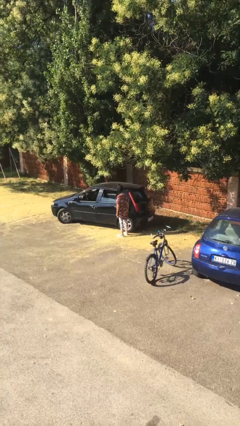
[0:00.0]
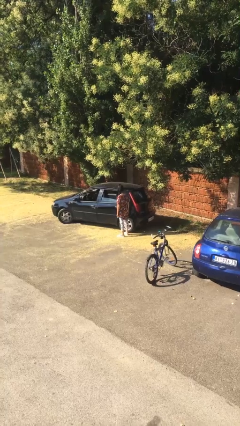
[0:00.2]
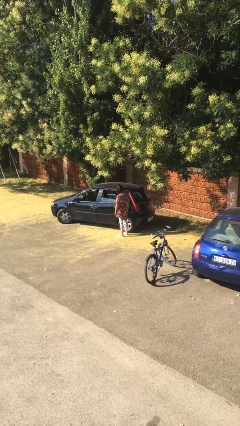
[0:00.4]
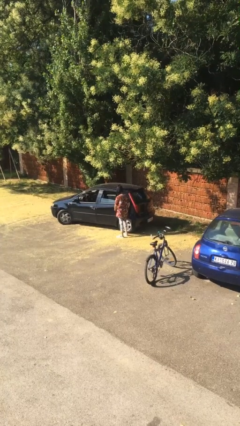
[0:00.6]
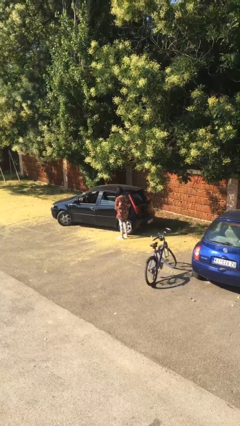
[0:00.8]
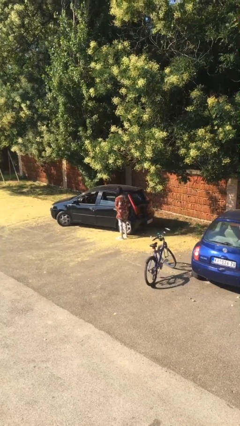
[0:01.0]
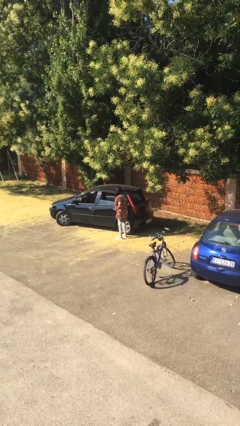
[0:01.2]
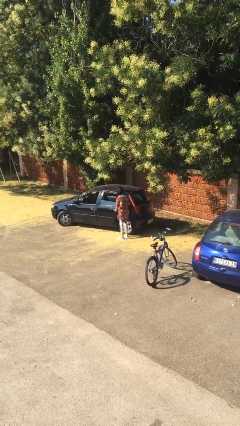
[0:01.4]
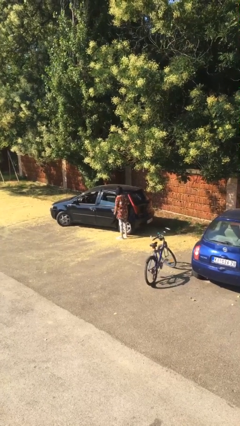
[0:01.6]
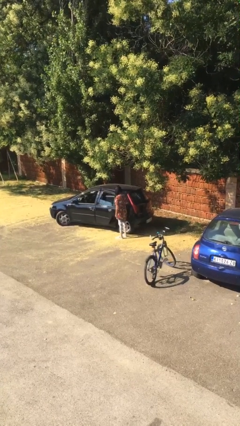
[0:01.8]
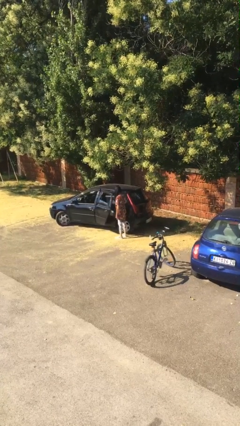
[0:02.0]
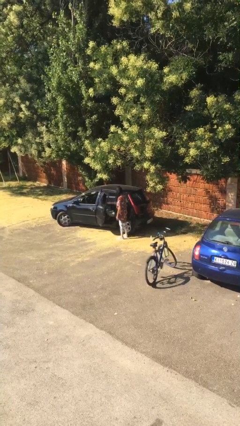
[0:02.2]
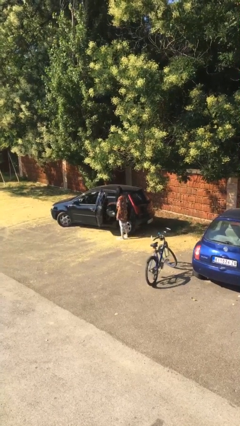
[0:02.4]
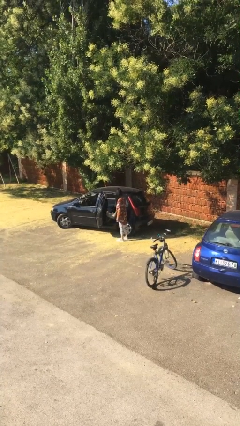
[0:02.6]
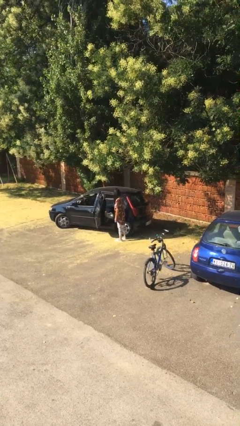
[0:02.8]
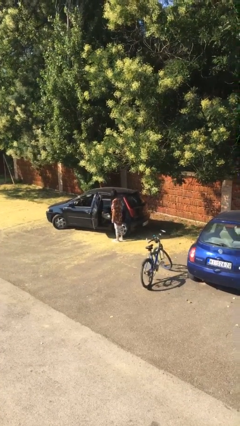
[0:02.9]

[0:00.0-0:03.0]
person opens car door

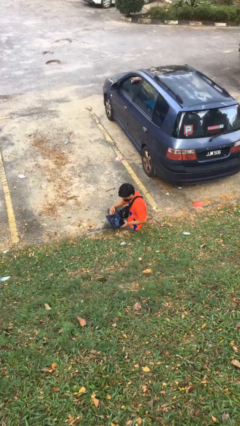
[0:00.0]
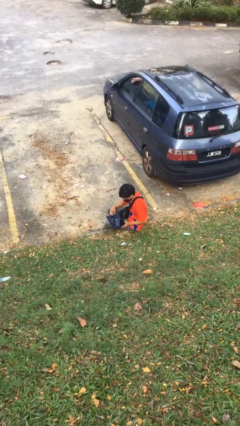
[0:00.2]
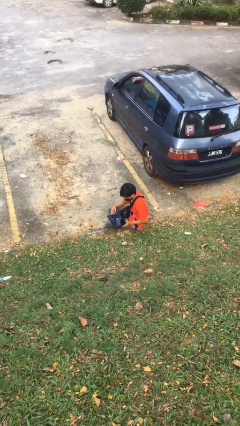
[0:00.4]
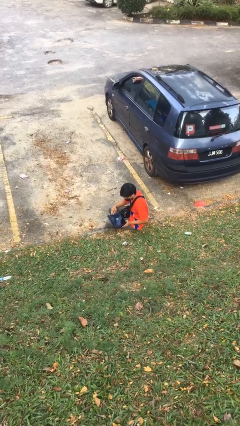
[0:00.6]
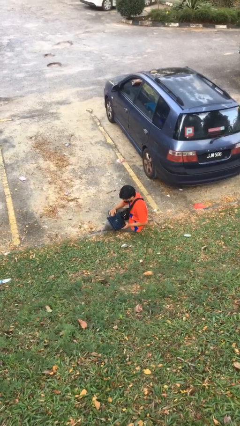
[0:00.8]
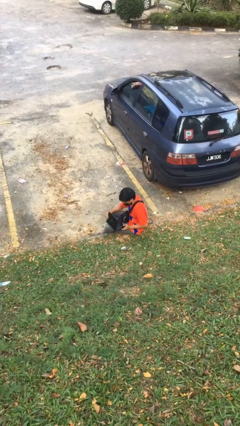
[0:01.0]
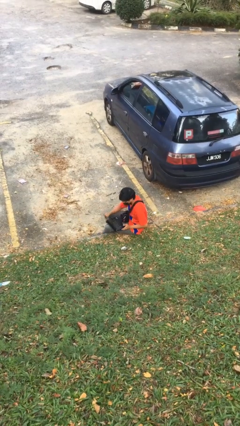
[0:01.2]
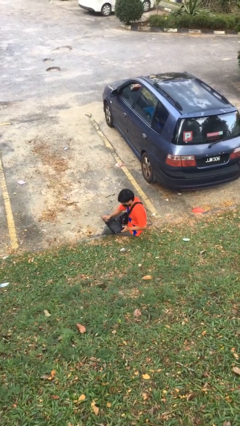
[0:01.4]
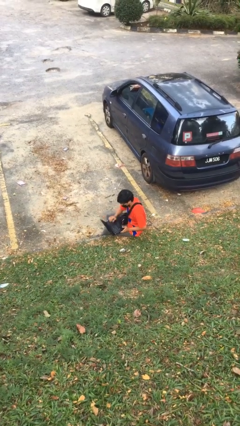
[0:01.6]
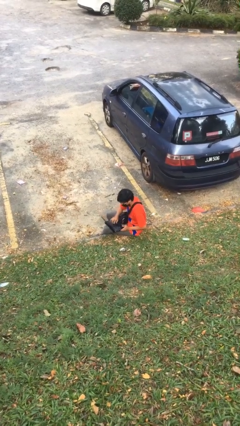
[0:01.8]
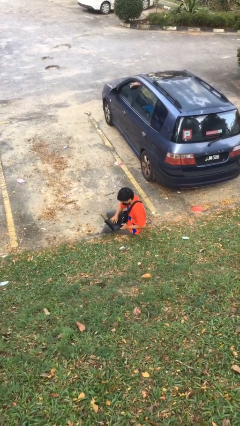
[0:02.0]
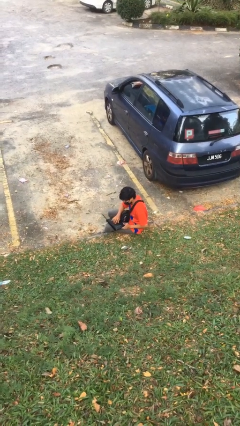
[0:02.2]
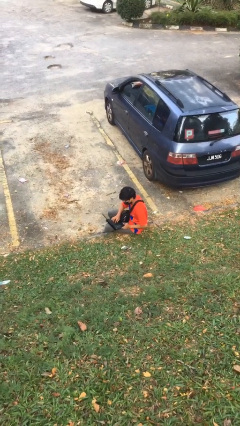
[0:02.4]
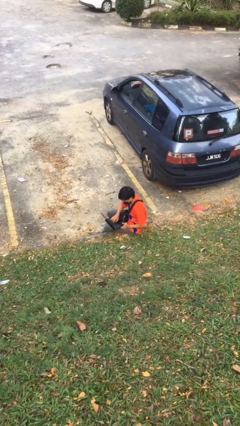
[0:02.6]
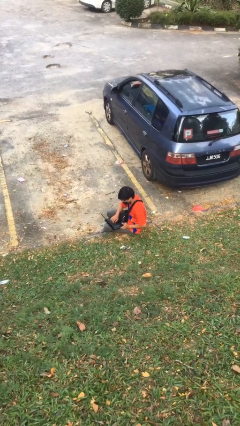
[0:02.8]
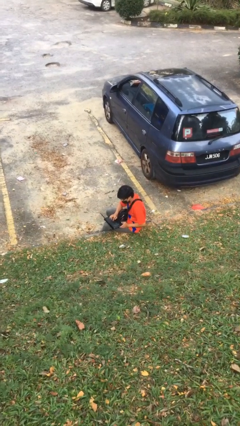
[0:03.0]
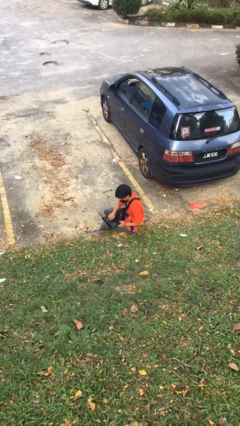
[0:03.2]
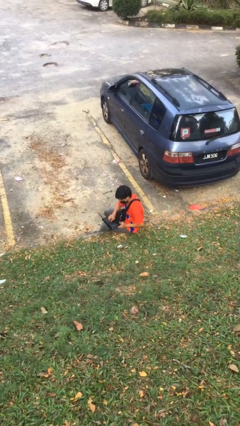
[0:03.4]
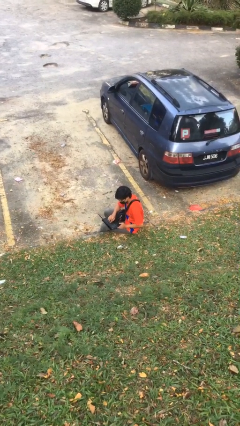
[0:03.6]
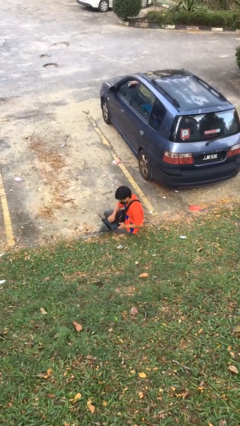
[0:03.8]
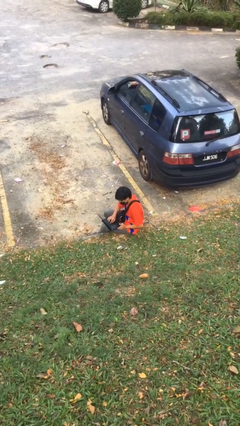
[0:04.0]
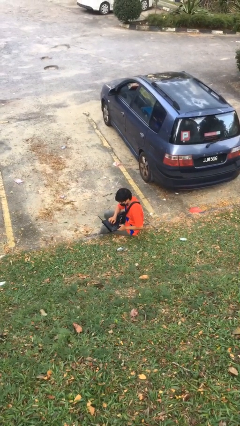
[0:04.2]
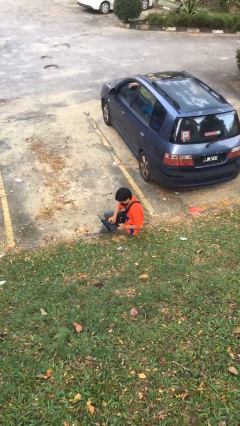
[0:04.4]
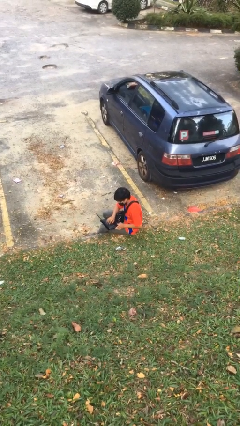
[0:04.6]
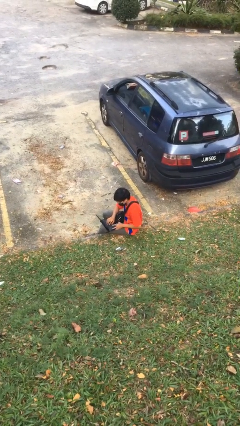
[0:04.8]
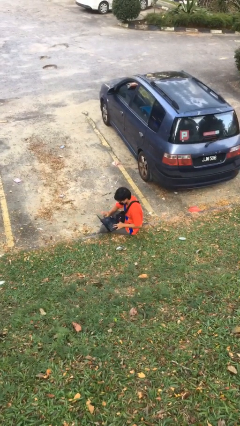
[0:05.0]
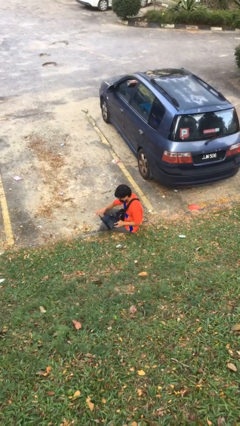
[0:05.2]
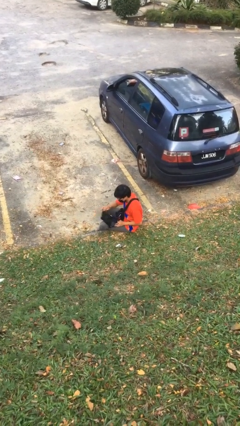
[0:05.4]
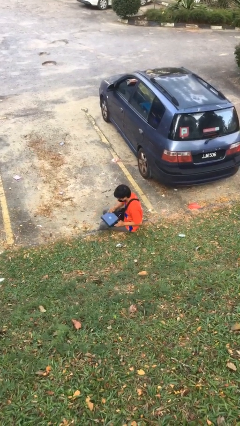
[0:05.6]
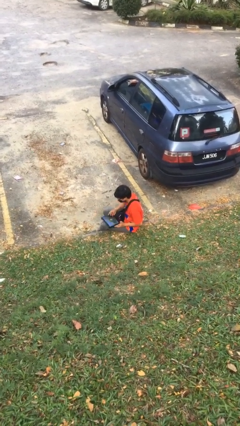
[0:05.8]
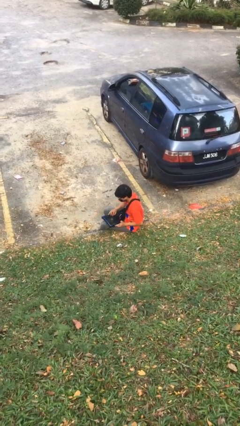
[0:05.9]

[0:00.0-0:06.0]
person interacts with laptop

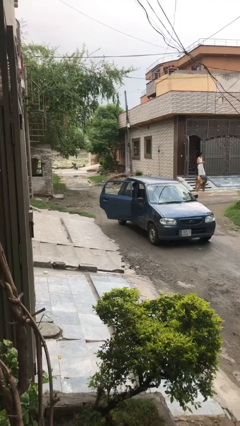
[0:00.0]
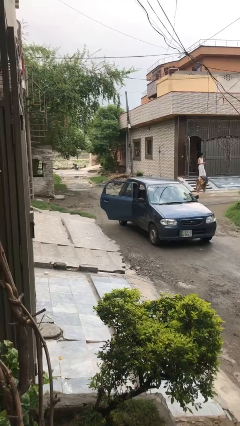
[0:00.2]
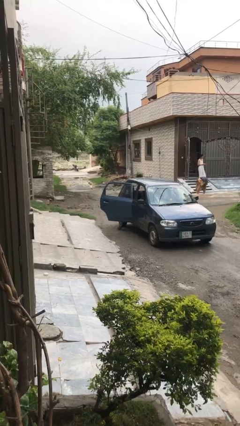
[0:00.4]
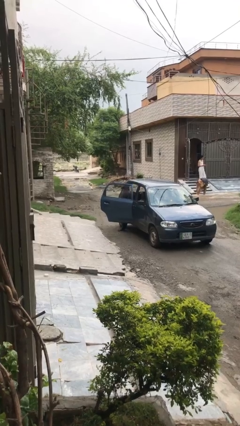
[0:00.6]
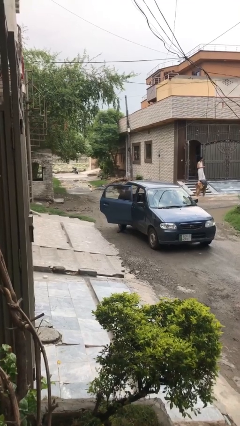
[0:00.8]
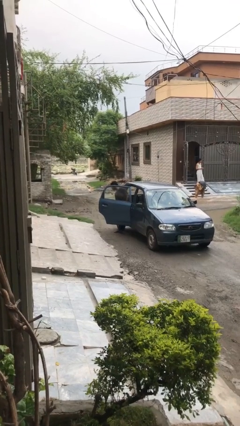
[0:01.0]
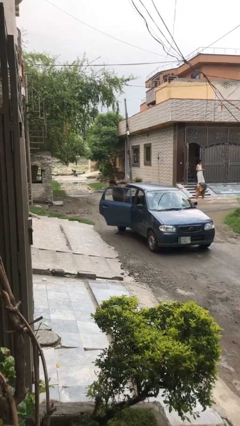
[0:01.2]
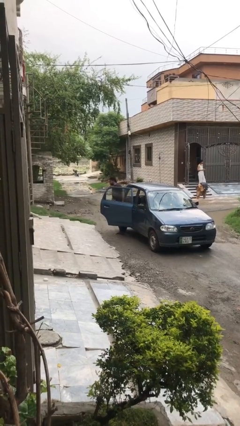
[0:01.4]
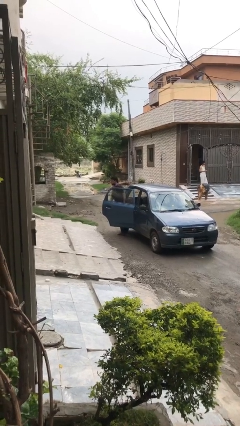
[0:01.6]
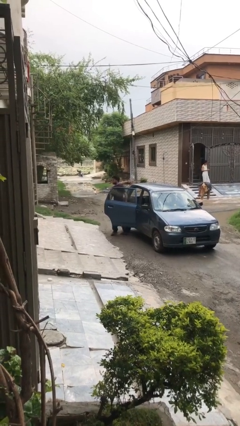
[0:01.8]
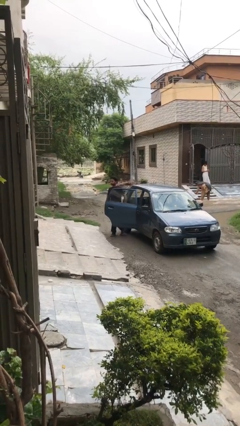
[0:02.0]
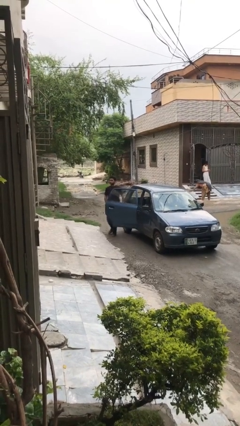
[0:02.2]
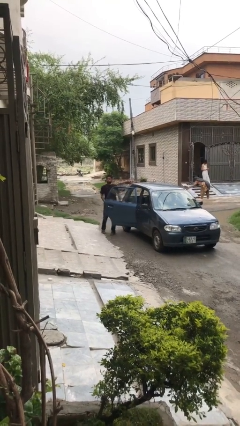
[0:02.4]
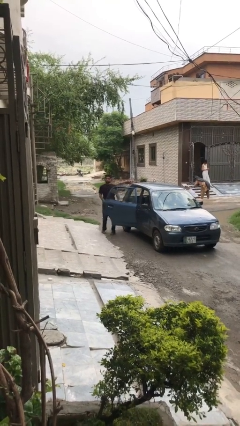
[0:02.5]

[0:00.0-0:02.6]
person exits car

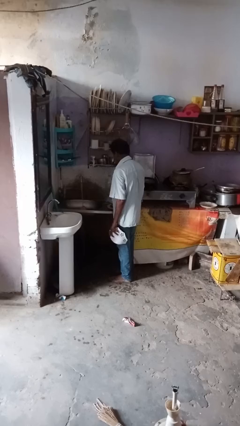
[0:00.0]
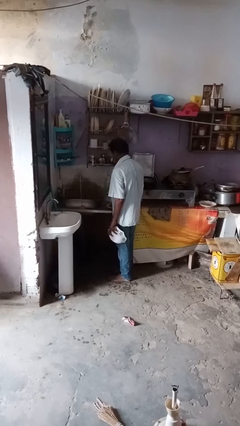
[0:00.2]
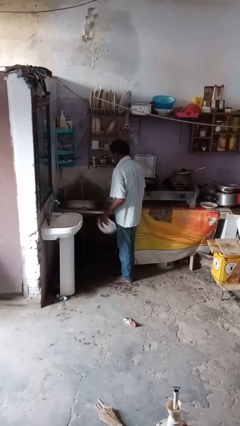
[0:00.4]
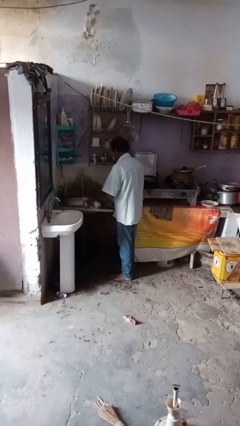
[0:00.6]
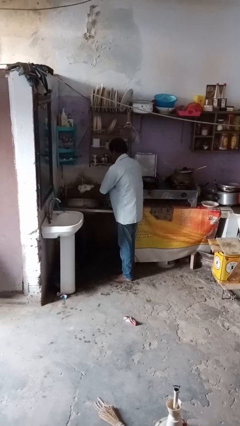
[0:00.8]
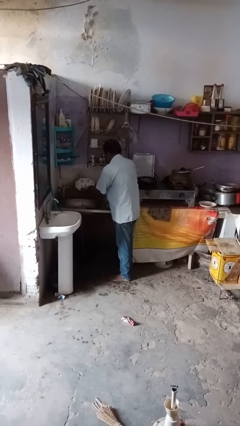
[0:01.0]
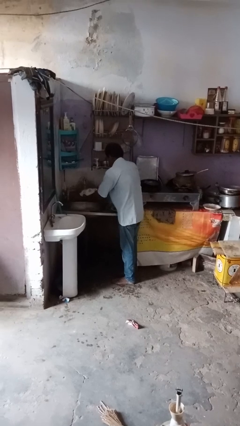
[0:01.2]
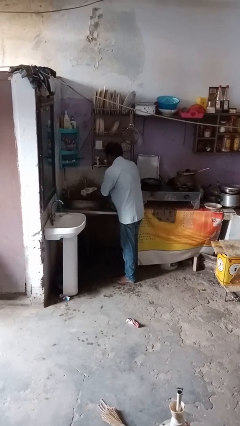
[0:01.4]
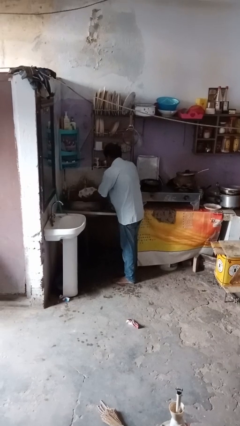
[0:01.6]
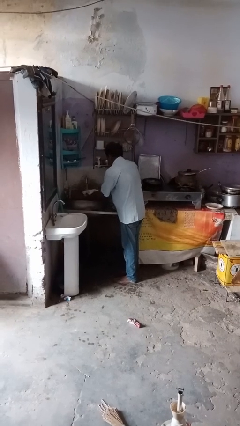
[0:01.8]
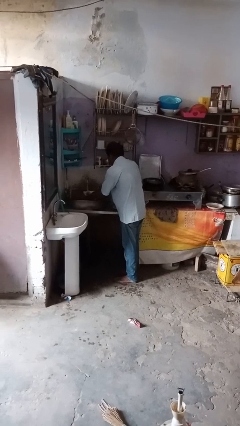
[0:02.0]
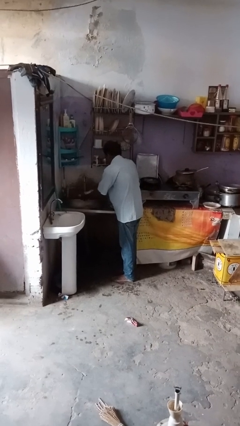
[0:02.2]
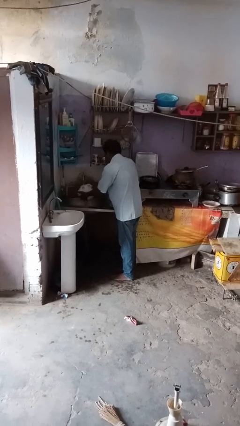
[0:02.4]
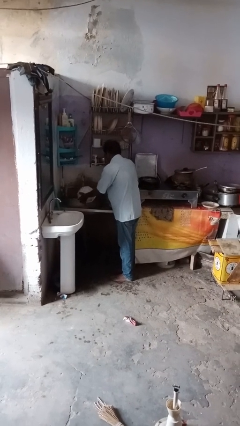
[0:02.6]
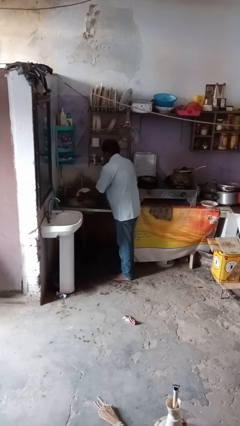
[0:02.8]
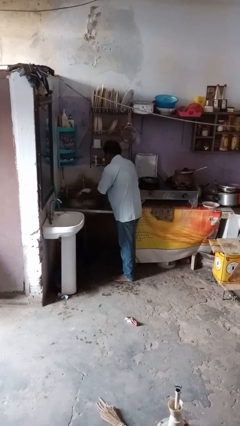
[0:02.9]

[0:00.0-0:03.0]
person washes dish

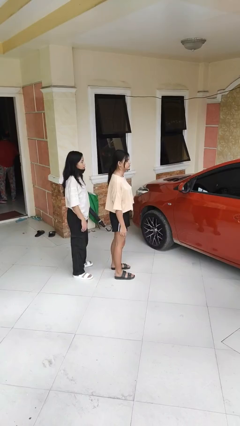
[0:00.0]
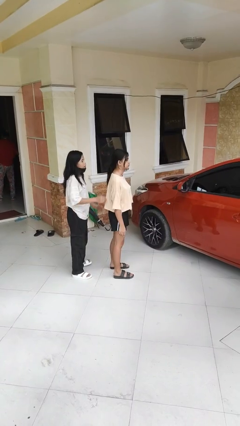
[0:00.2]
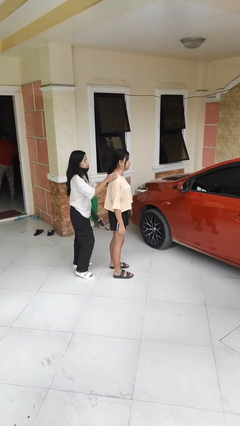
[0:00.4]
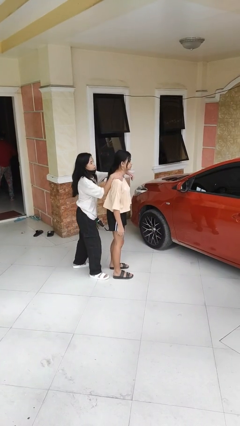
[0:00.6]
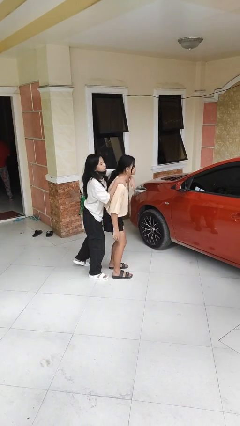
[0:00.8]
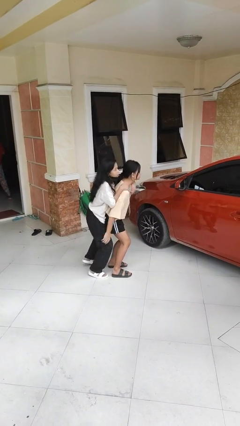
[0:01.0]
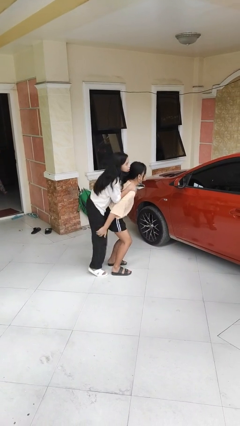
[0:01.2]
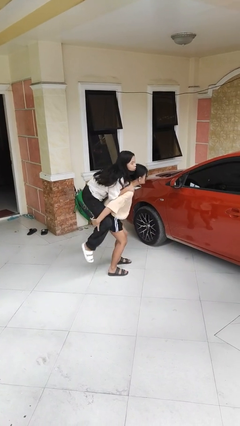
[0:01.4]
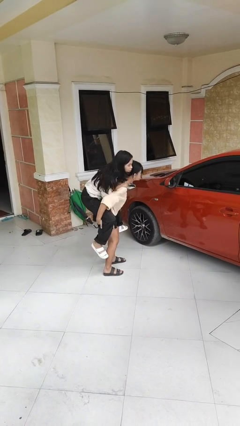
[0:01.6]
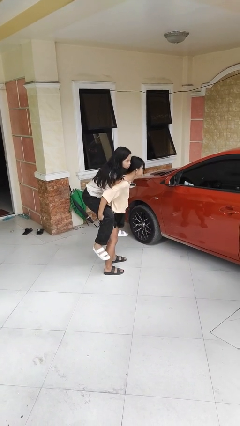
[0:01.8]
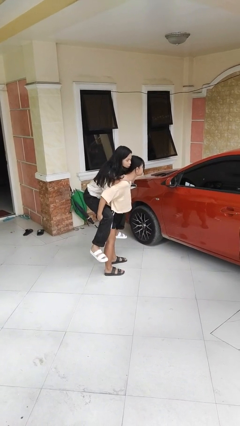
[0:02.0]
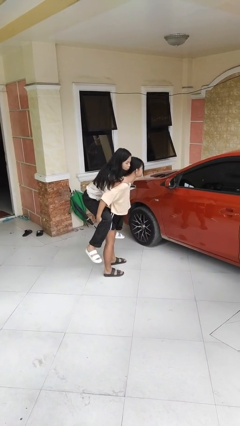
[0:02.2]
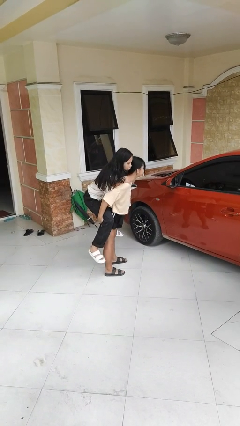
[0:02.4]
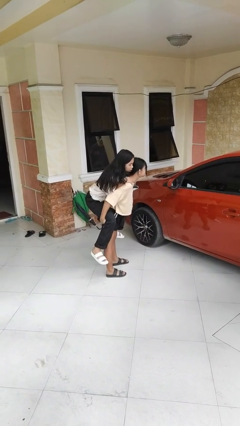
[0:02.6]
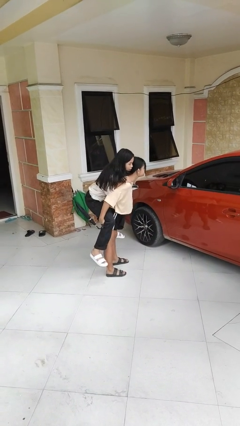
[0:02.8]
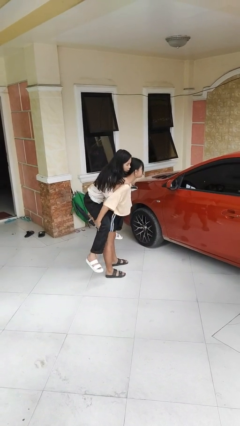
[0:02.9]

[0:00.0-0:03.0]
person carries person over shoulder
